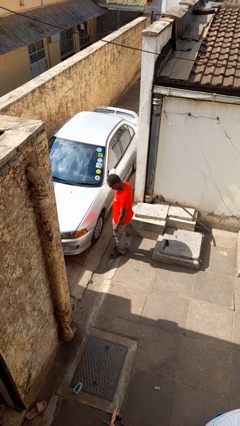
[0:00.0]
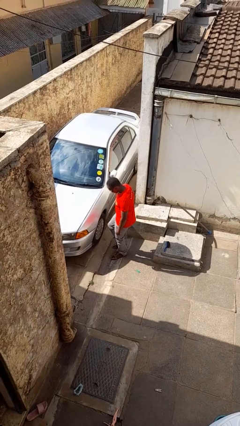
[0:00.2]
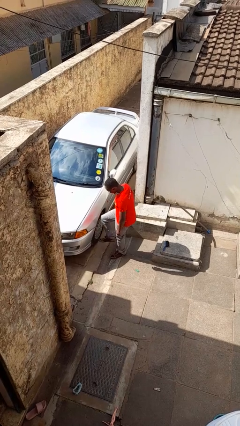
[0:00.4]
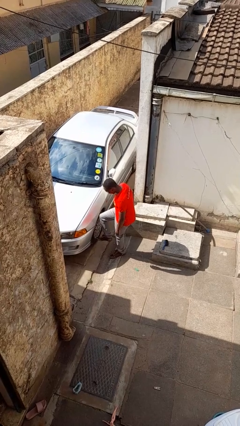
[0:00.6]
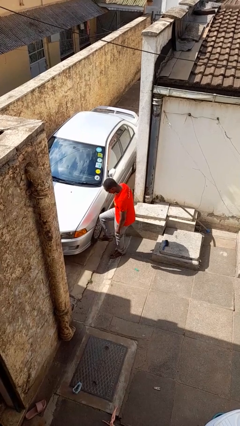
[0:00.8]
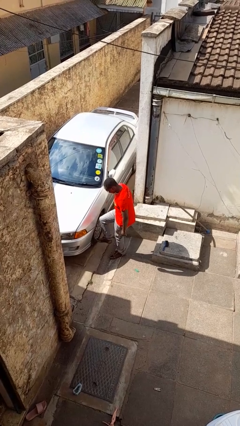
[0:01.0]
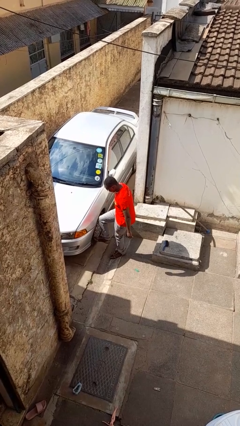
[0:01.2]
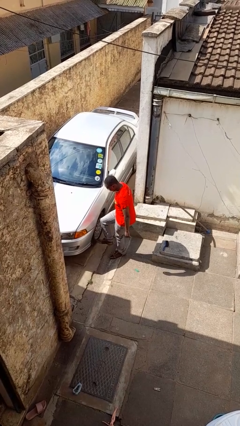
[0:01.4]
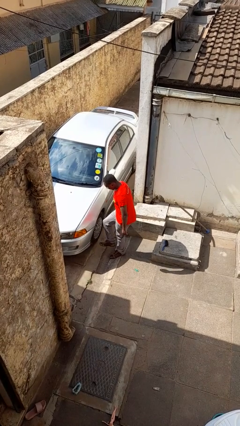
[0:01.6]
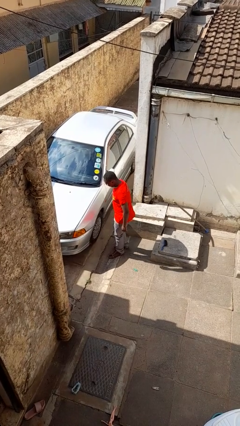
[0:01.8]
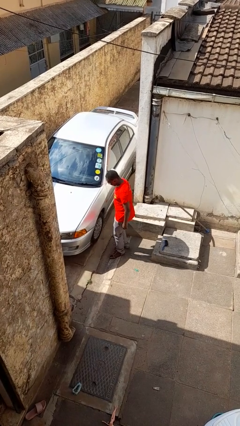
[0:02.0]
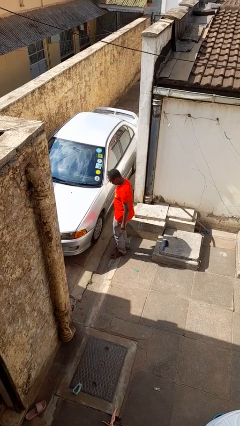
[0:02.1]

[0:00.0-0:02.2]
person kicks car tires

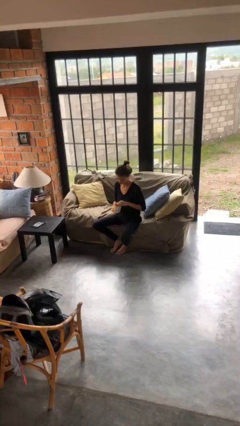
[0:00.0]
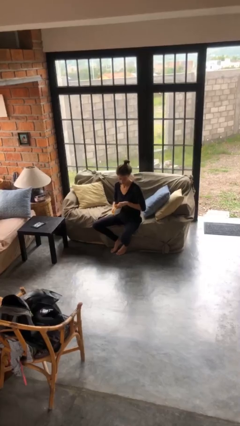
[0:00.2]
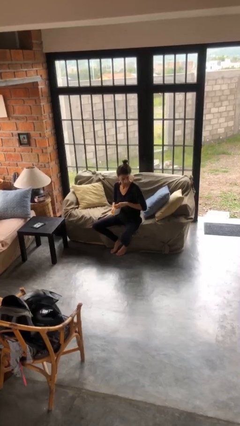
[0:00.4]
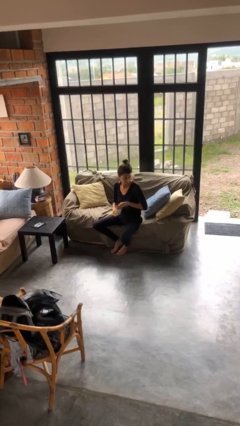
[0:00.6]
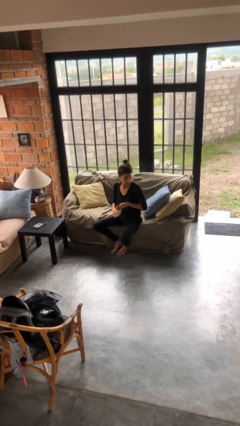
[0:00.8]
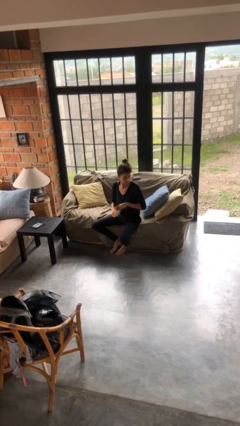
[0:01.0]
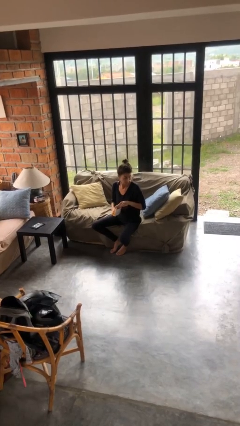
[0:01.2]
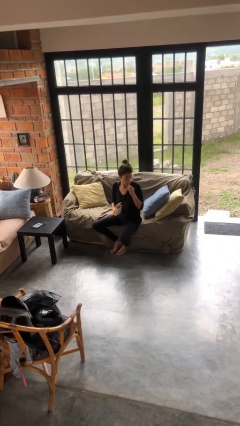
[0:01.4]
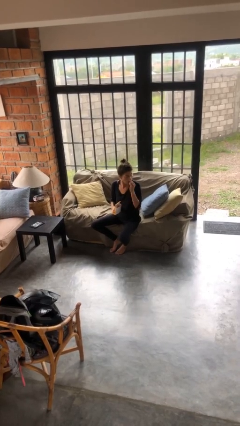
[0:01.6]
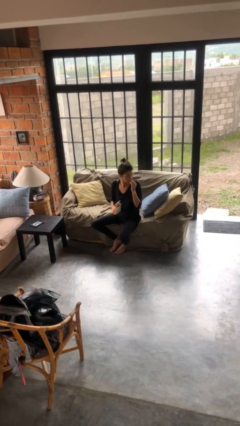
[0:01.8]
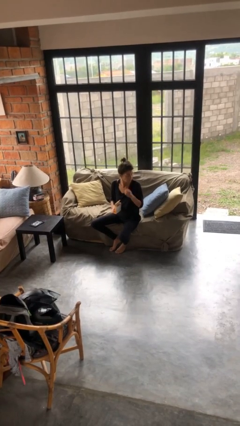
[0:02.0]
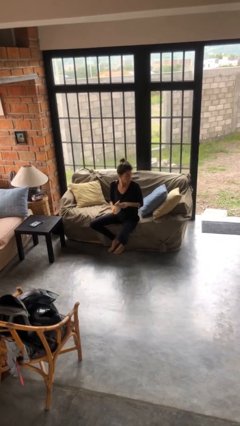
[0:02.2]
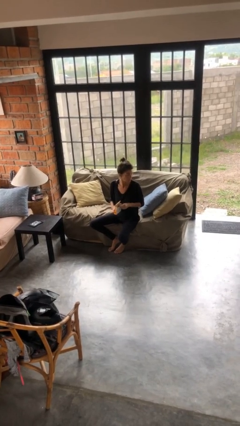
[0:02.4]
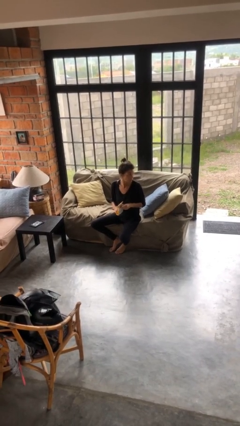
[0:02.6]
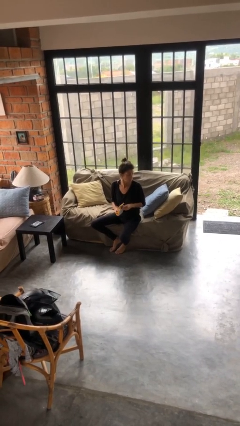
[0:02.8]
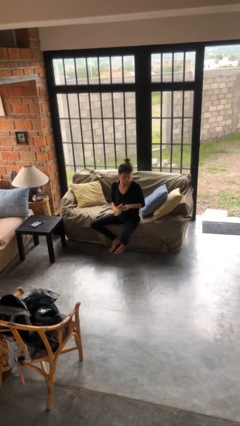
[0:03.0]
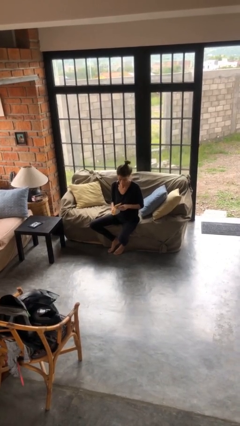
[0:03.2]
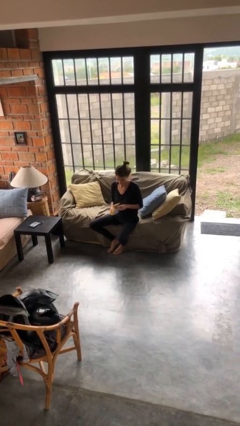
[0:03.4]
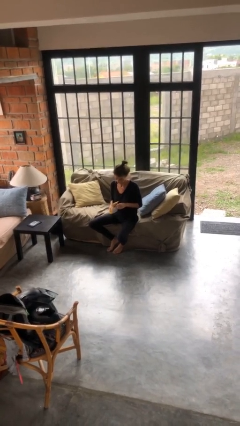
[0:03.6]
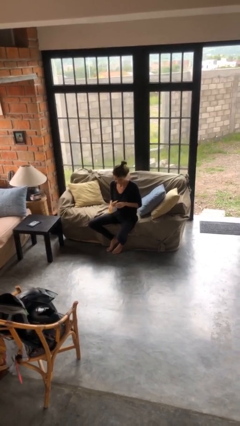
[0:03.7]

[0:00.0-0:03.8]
person eats snack from bag

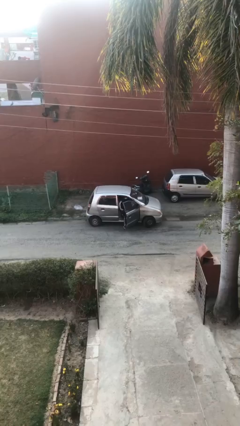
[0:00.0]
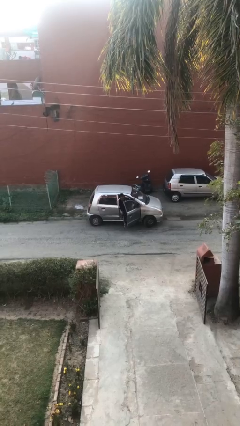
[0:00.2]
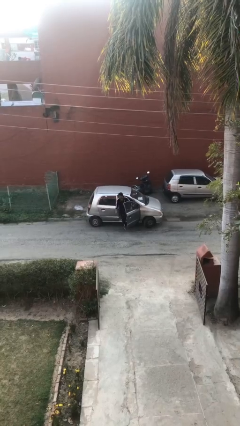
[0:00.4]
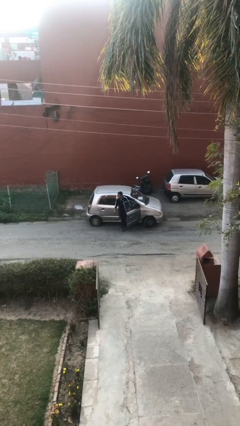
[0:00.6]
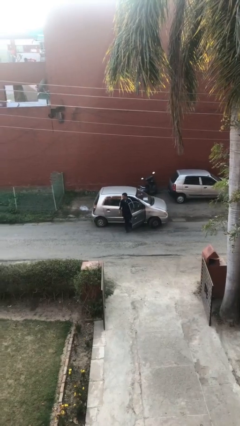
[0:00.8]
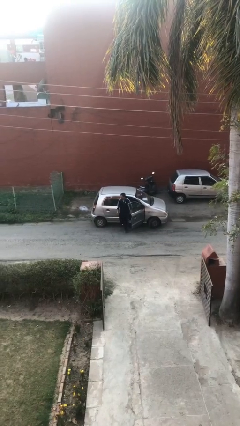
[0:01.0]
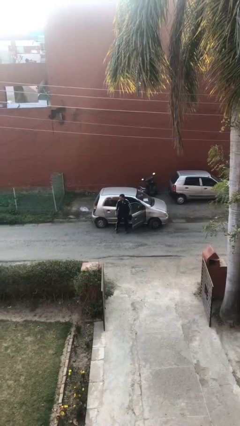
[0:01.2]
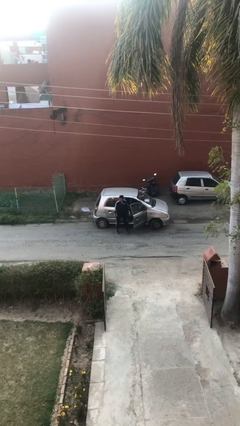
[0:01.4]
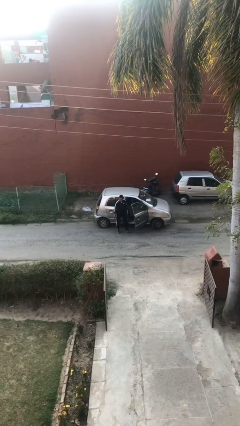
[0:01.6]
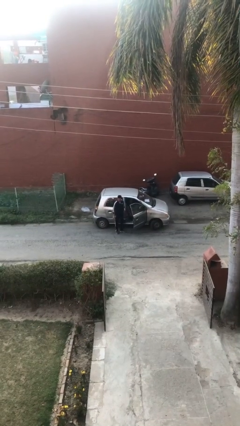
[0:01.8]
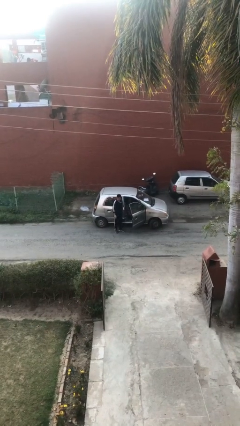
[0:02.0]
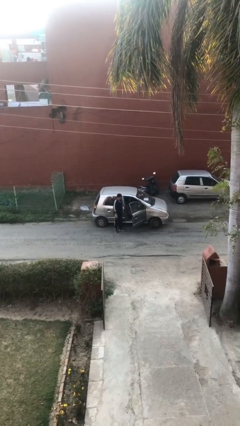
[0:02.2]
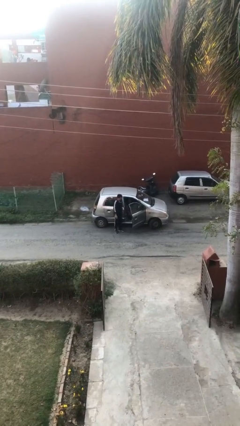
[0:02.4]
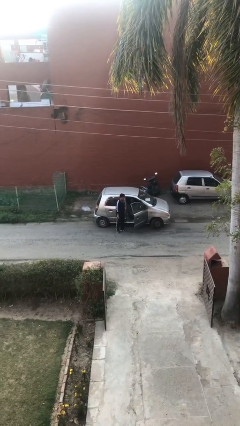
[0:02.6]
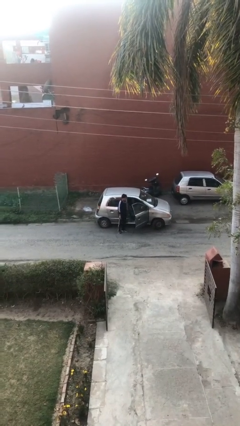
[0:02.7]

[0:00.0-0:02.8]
person exits car

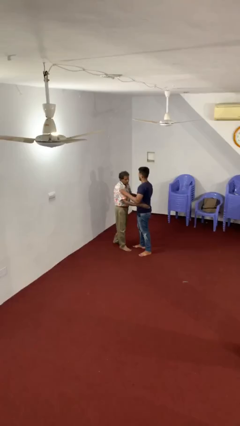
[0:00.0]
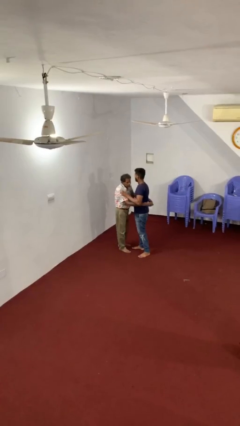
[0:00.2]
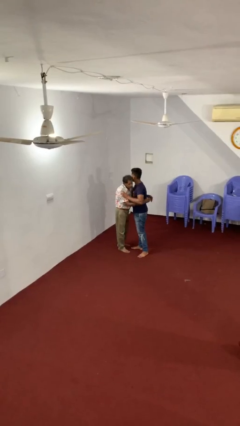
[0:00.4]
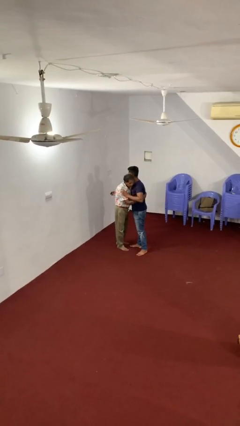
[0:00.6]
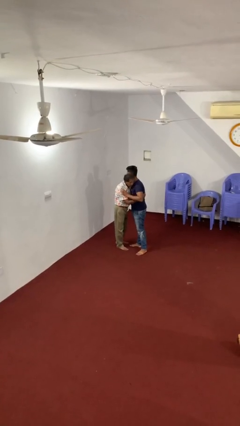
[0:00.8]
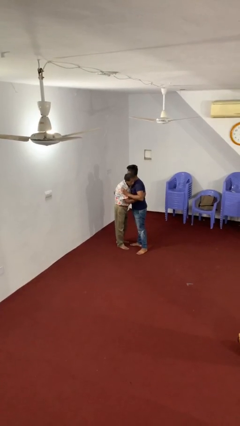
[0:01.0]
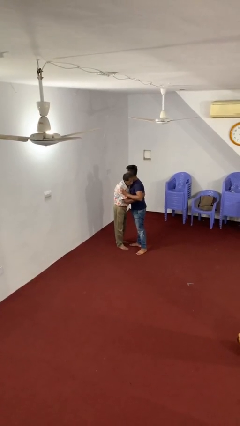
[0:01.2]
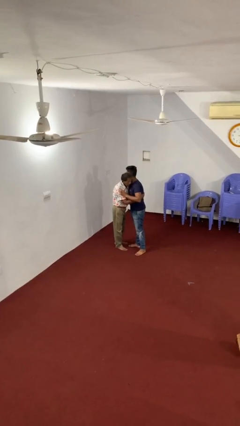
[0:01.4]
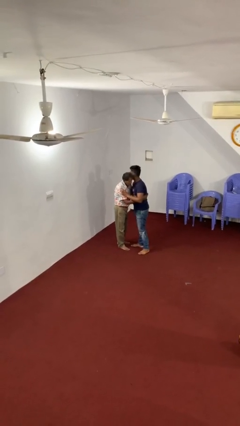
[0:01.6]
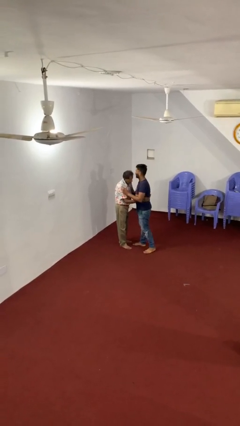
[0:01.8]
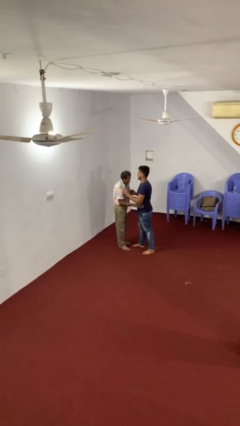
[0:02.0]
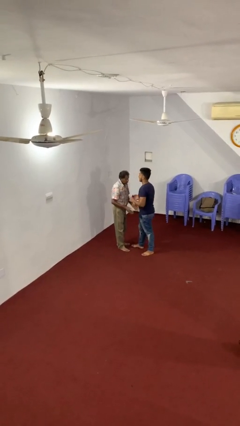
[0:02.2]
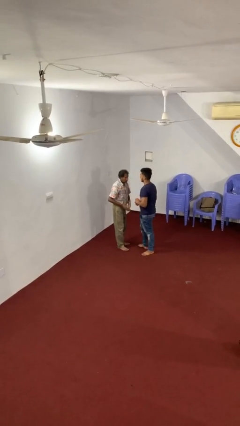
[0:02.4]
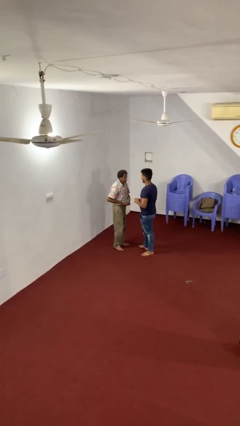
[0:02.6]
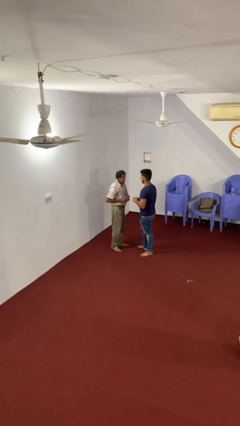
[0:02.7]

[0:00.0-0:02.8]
person embraces person

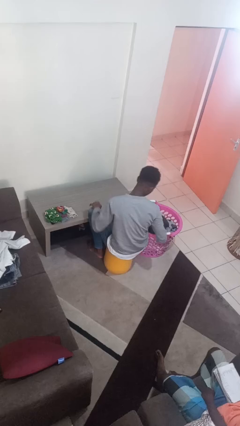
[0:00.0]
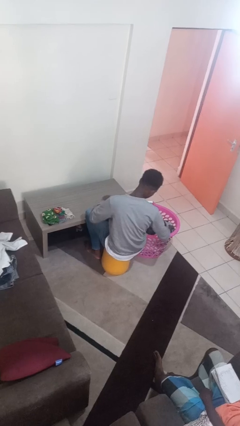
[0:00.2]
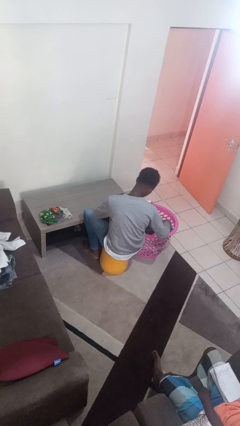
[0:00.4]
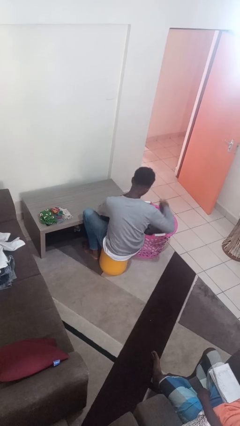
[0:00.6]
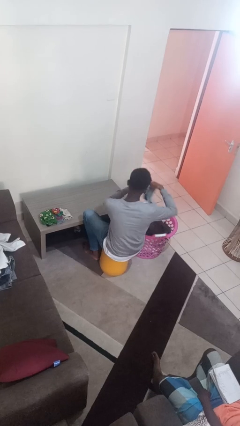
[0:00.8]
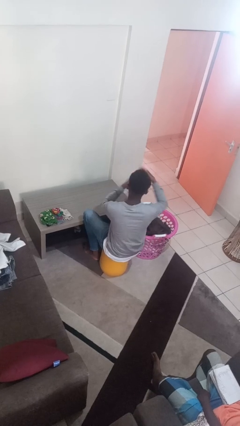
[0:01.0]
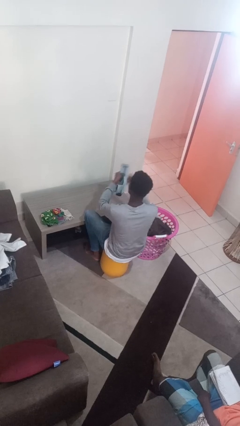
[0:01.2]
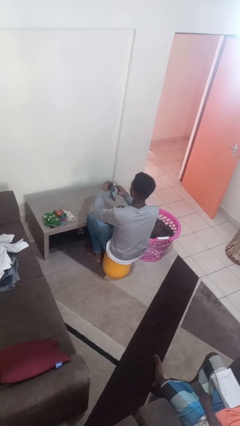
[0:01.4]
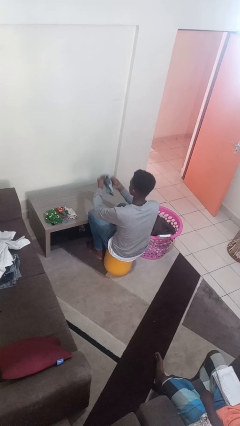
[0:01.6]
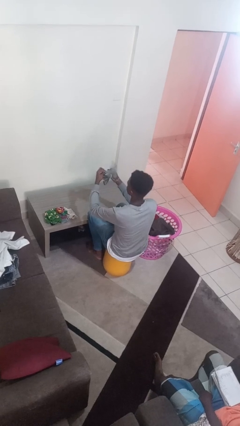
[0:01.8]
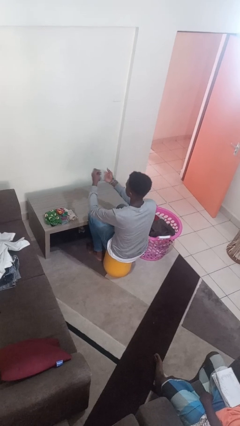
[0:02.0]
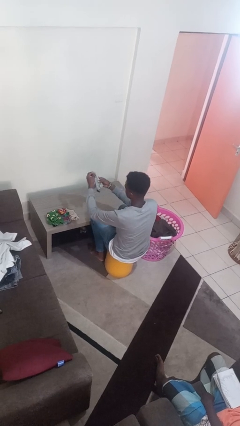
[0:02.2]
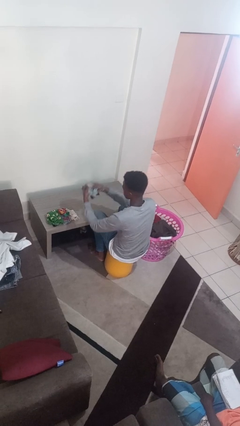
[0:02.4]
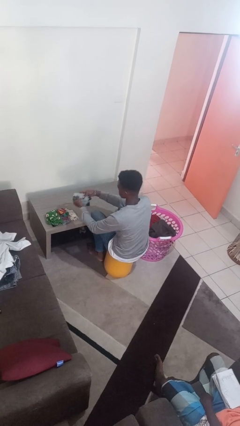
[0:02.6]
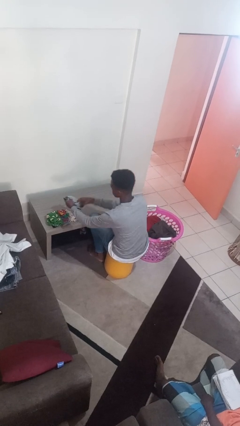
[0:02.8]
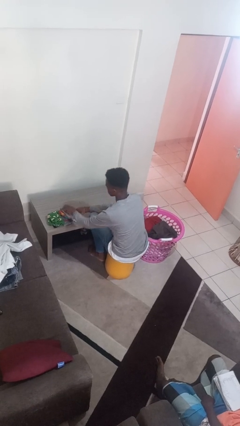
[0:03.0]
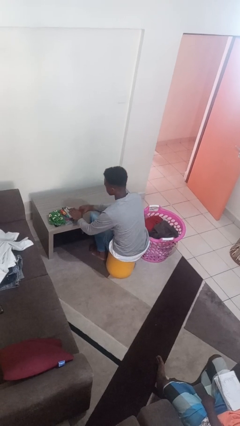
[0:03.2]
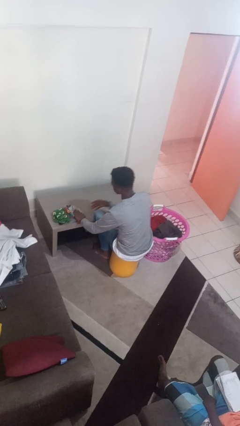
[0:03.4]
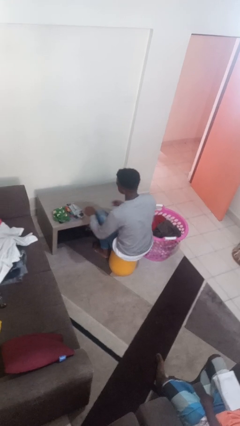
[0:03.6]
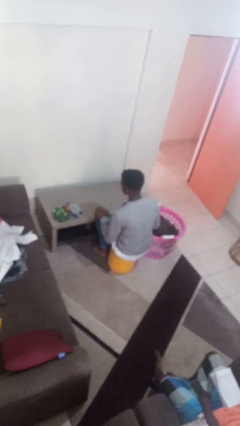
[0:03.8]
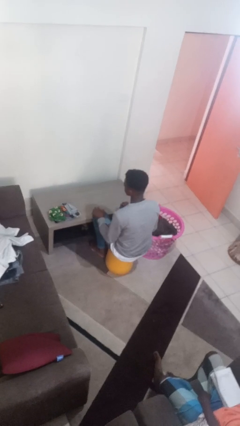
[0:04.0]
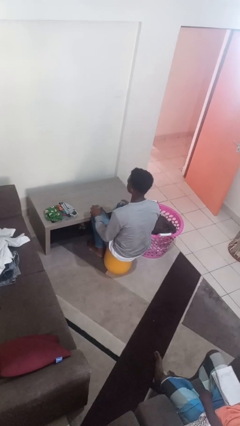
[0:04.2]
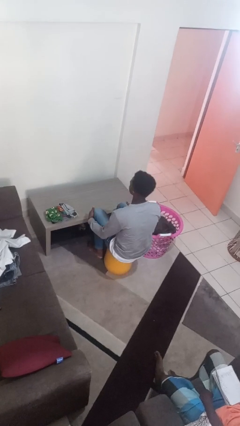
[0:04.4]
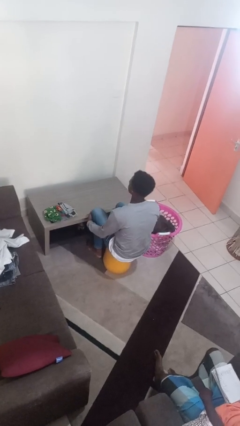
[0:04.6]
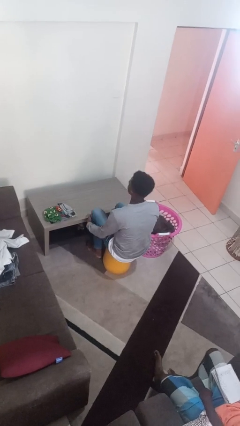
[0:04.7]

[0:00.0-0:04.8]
person folds socks

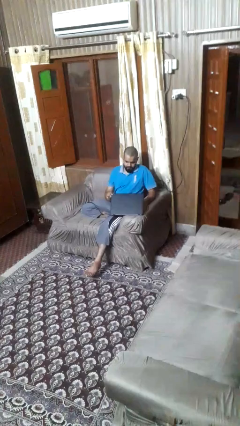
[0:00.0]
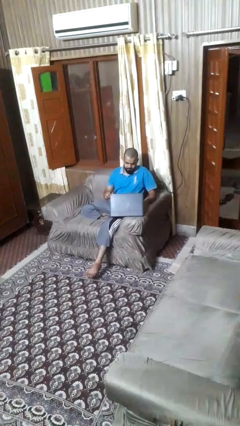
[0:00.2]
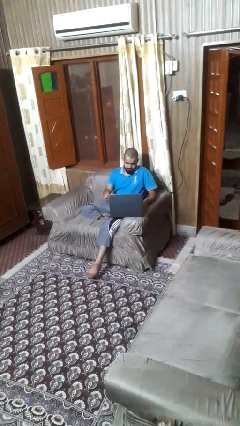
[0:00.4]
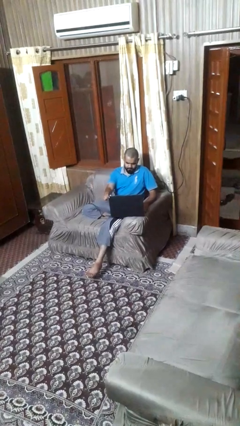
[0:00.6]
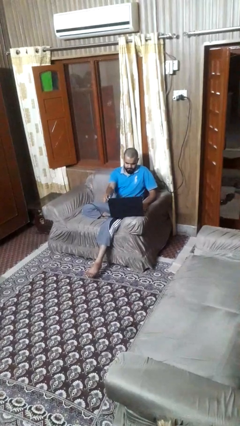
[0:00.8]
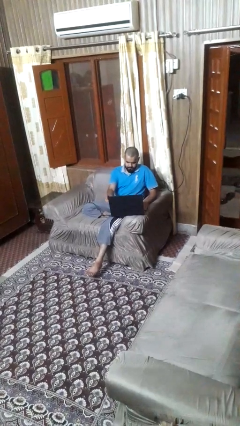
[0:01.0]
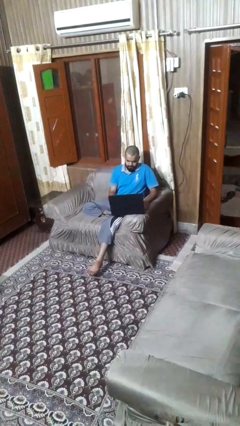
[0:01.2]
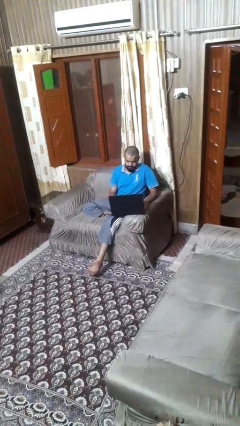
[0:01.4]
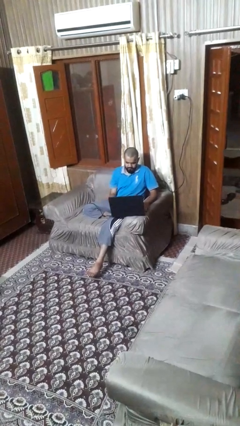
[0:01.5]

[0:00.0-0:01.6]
person opens laptop
